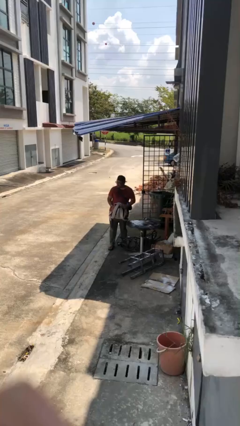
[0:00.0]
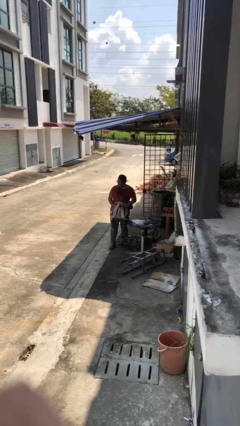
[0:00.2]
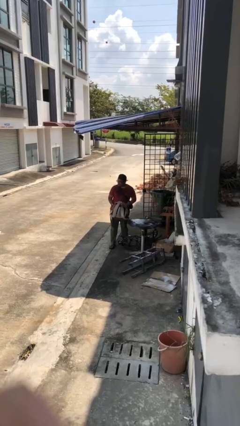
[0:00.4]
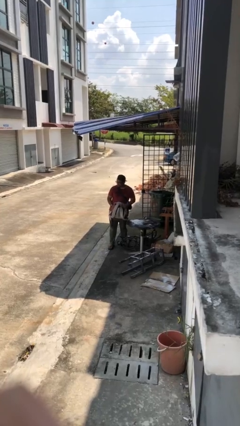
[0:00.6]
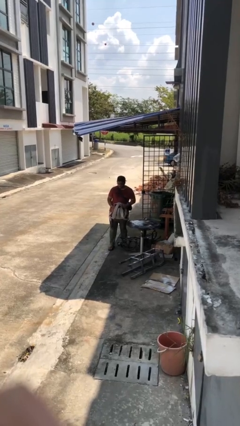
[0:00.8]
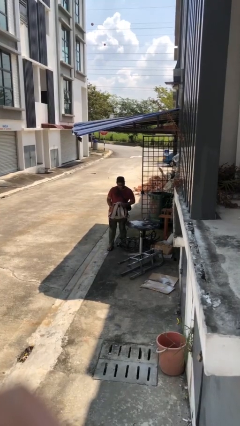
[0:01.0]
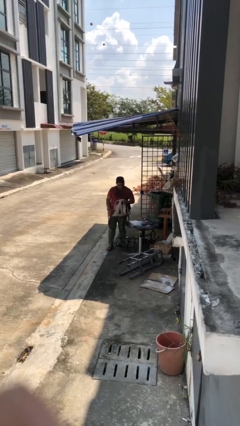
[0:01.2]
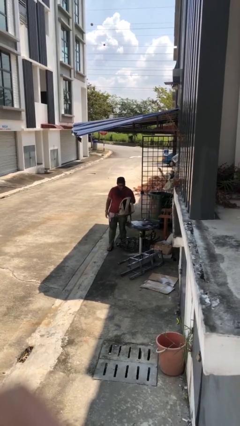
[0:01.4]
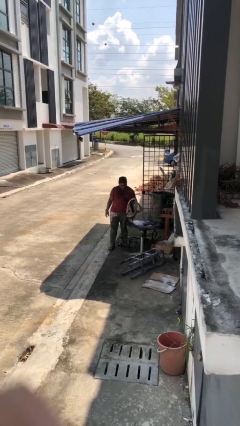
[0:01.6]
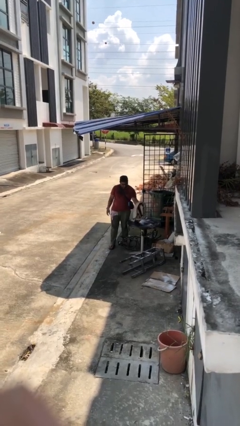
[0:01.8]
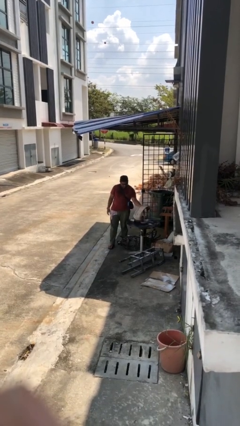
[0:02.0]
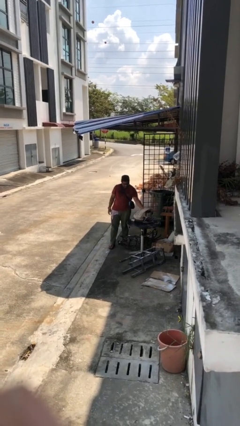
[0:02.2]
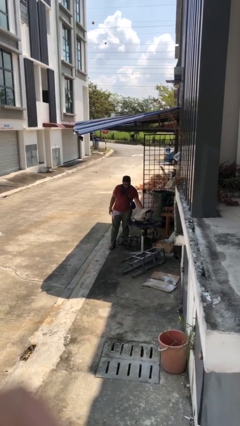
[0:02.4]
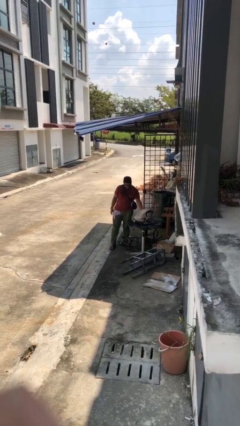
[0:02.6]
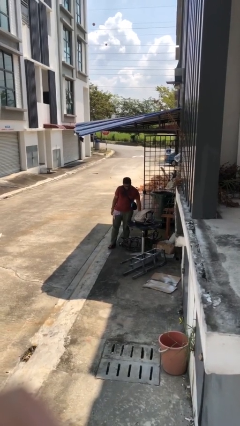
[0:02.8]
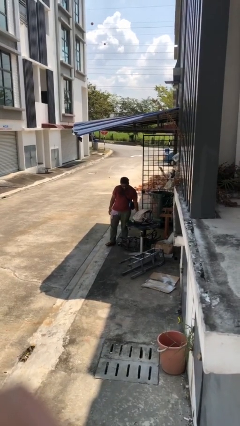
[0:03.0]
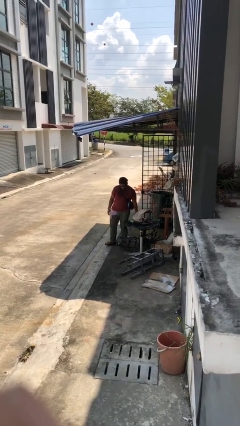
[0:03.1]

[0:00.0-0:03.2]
person puts down object on table

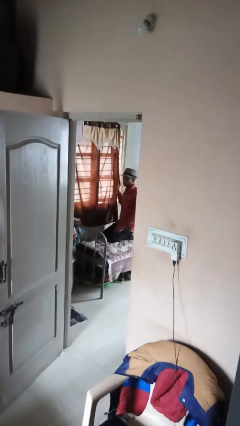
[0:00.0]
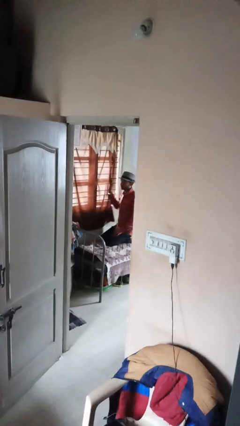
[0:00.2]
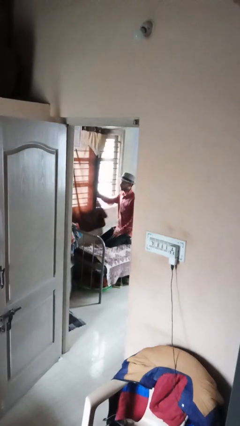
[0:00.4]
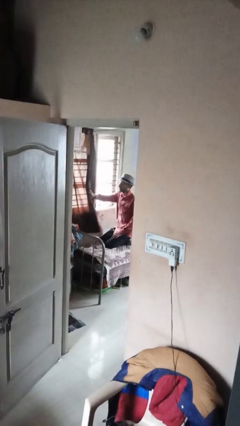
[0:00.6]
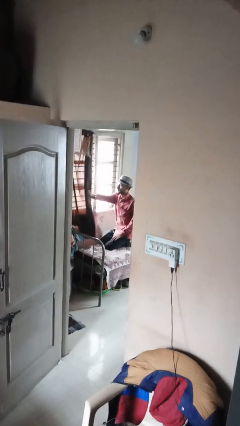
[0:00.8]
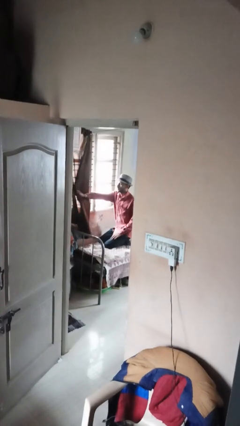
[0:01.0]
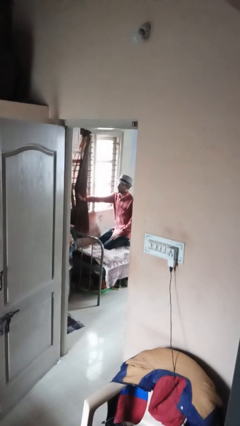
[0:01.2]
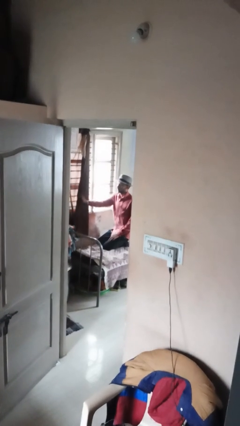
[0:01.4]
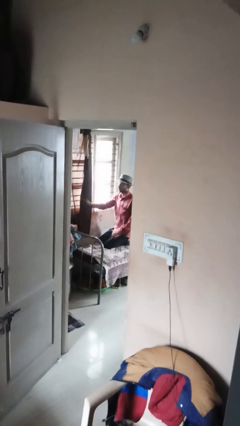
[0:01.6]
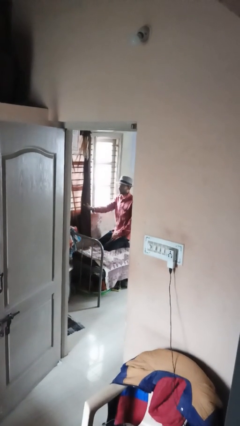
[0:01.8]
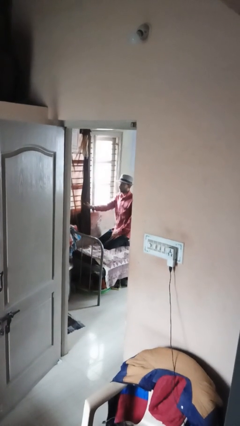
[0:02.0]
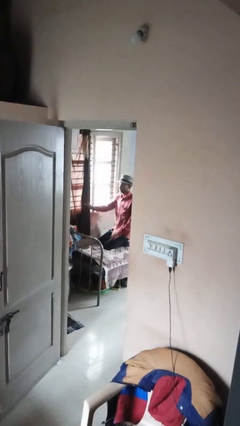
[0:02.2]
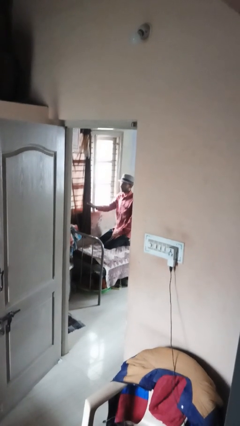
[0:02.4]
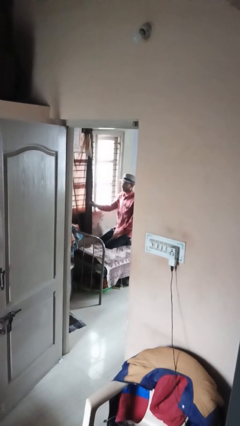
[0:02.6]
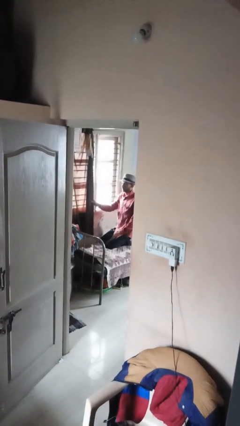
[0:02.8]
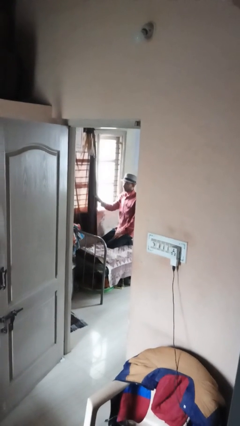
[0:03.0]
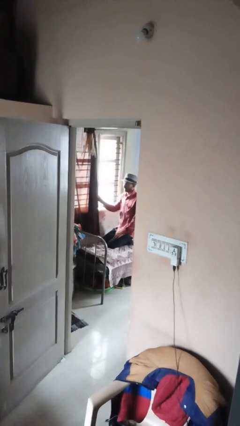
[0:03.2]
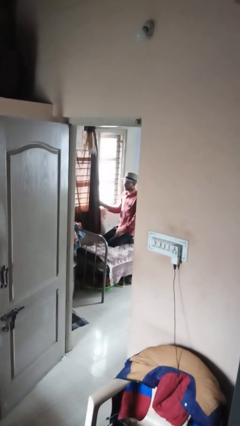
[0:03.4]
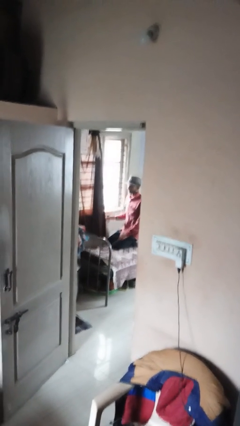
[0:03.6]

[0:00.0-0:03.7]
person opens curtains

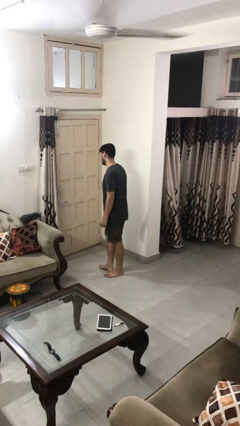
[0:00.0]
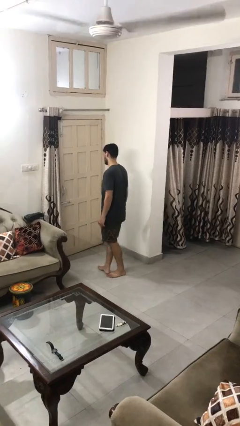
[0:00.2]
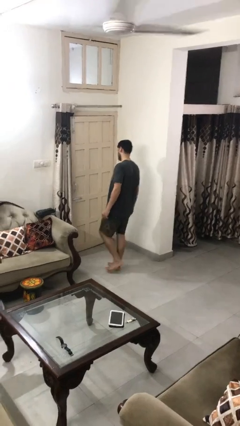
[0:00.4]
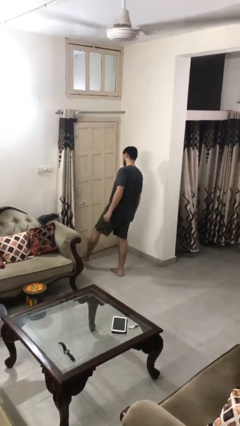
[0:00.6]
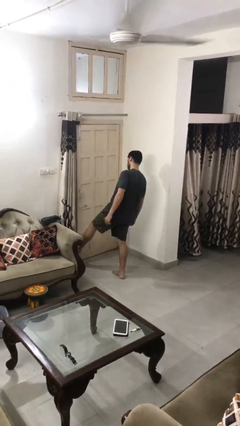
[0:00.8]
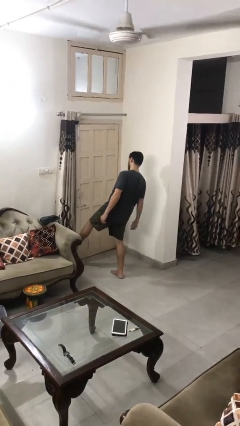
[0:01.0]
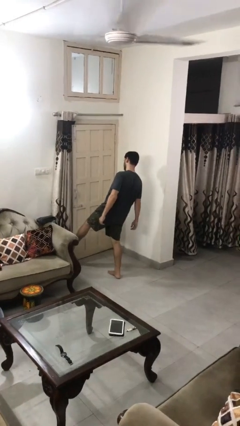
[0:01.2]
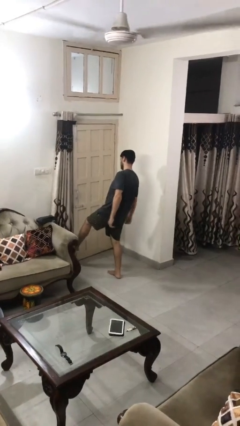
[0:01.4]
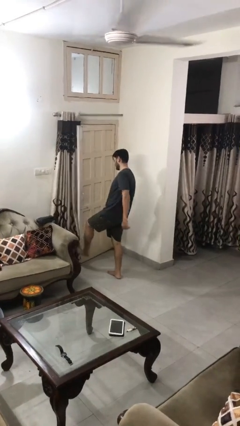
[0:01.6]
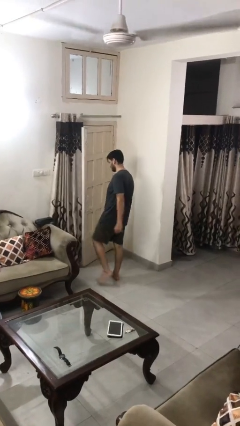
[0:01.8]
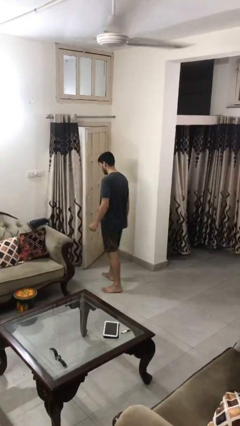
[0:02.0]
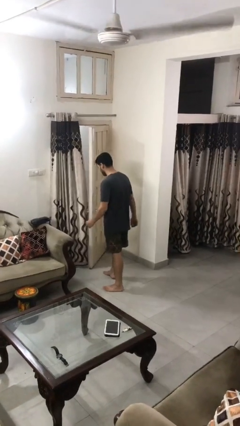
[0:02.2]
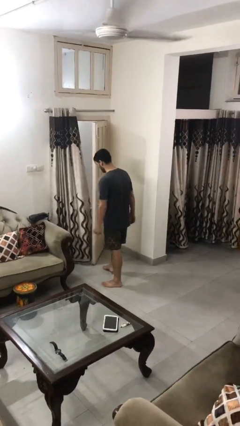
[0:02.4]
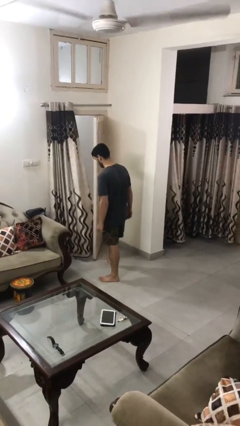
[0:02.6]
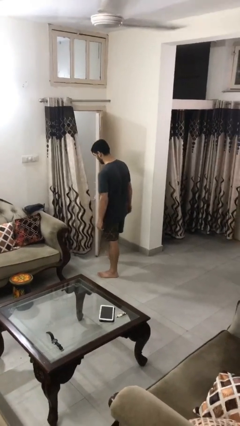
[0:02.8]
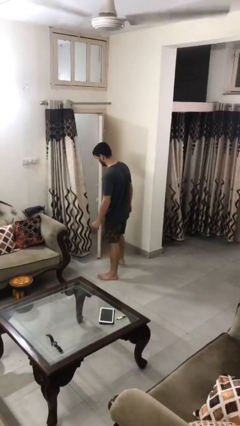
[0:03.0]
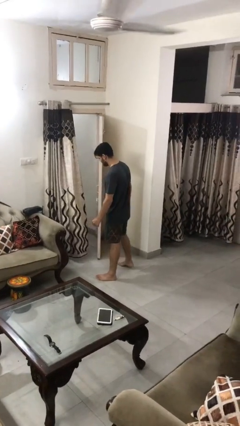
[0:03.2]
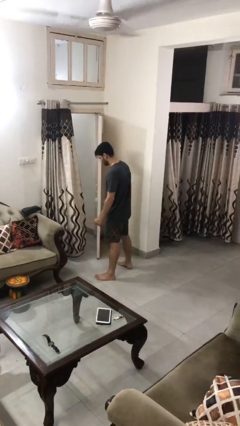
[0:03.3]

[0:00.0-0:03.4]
person opens facility door

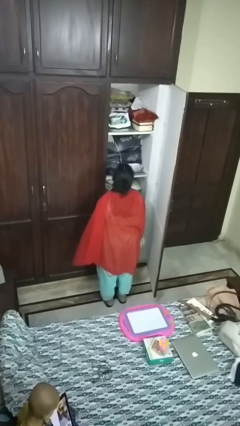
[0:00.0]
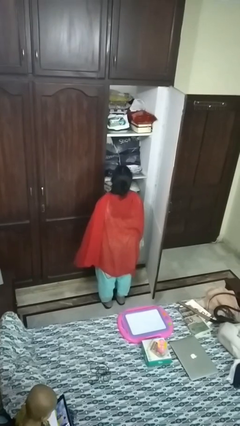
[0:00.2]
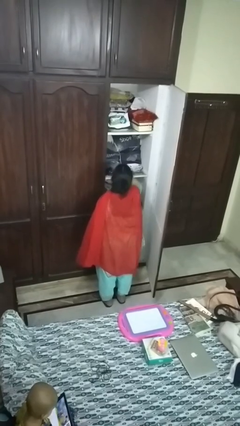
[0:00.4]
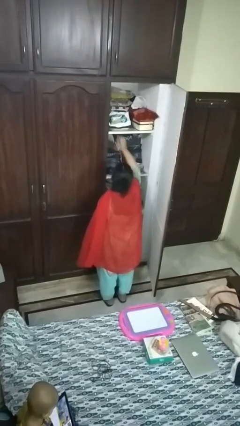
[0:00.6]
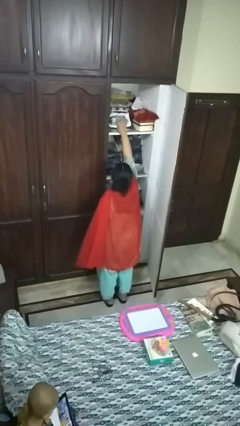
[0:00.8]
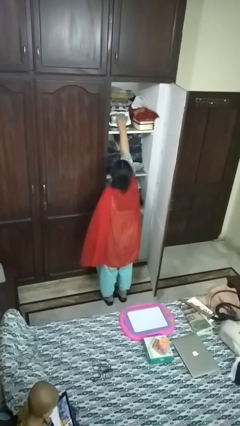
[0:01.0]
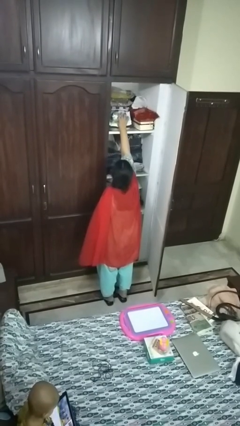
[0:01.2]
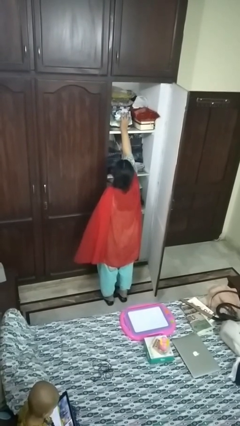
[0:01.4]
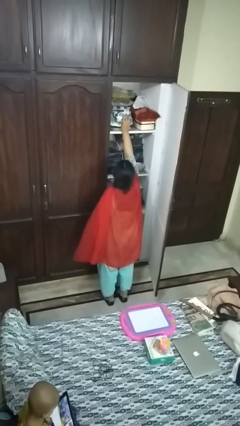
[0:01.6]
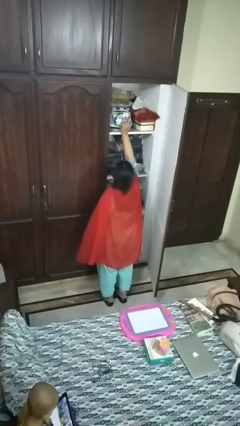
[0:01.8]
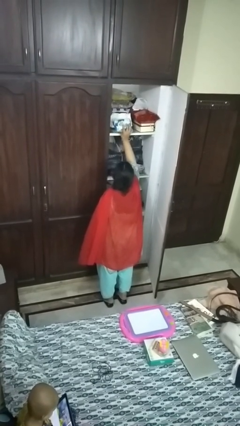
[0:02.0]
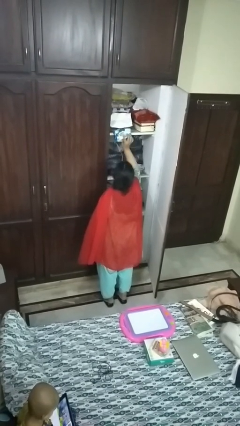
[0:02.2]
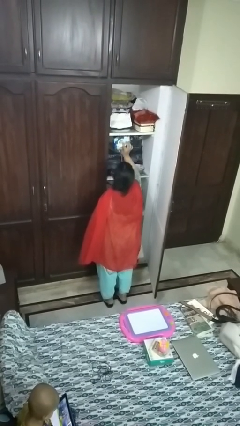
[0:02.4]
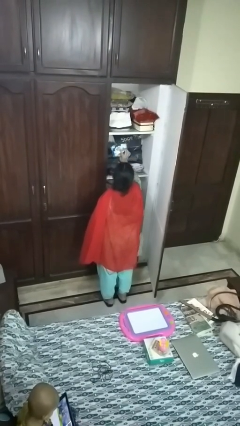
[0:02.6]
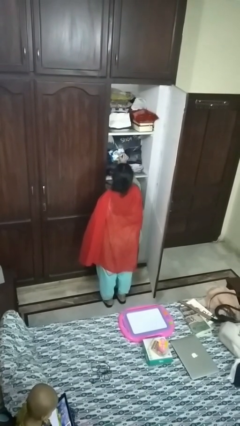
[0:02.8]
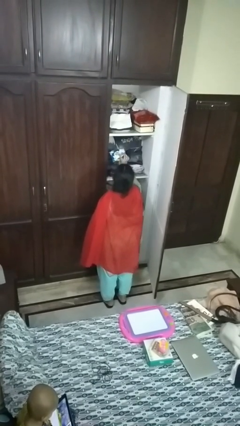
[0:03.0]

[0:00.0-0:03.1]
person picks up object from countertop

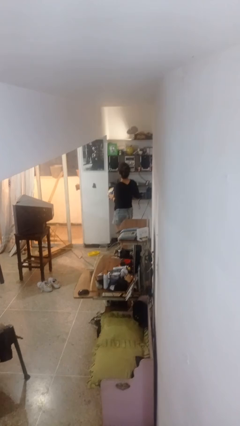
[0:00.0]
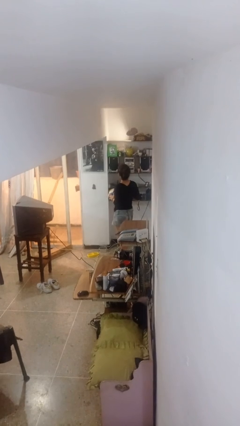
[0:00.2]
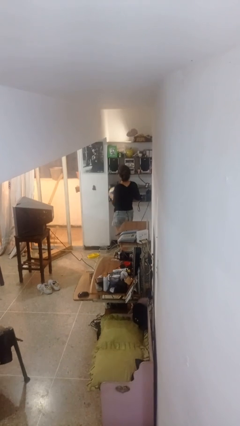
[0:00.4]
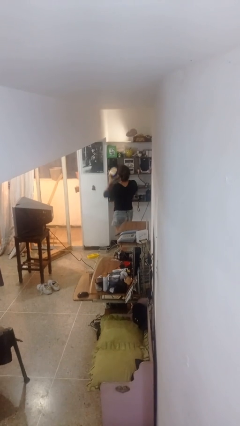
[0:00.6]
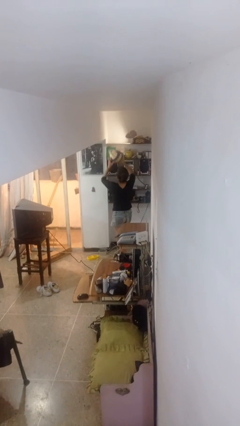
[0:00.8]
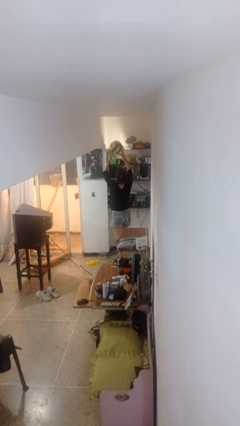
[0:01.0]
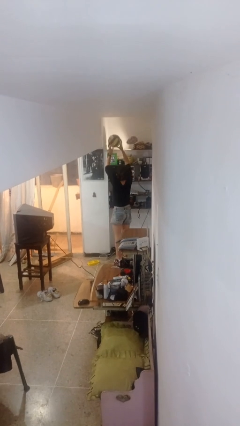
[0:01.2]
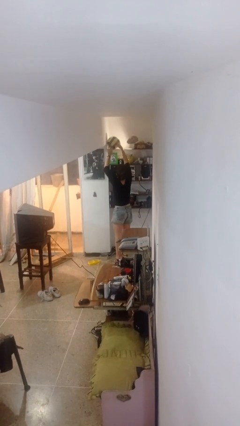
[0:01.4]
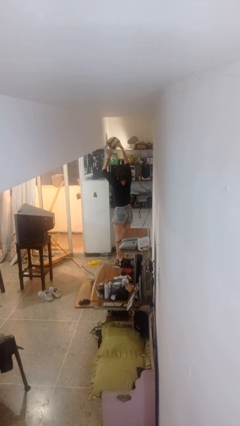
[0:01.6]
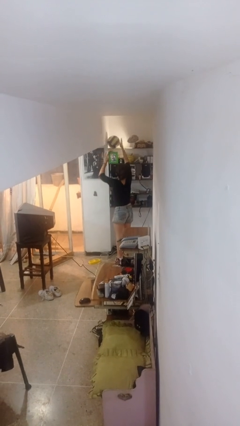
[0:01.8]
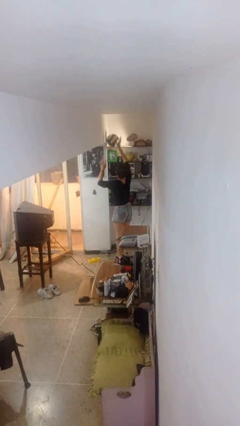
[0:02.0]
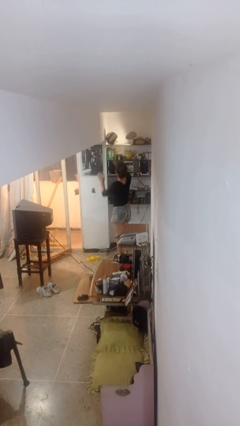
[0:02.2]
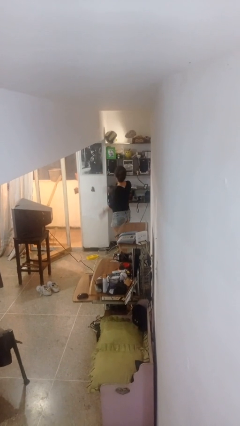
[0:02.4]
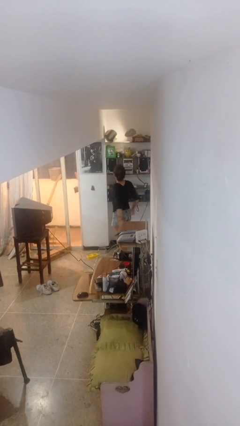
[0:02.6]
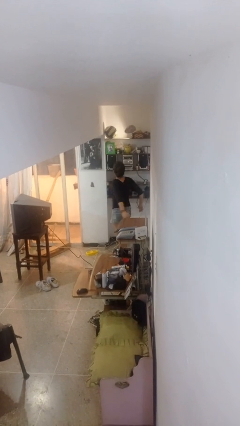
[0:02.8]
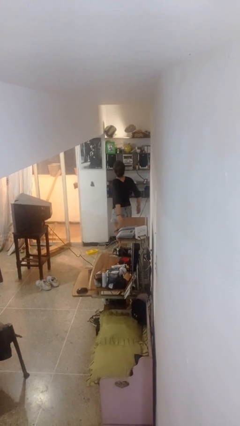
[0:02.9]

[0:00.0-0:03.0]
person puts down object on shelf

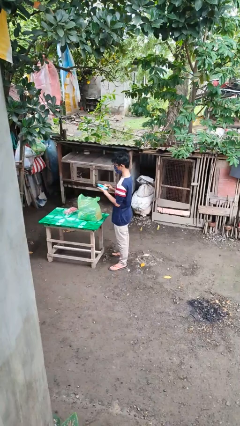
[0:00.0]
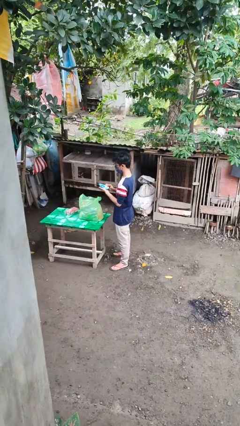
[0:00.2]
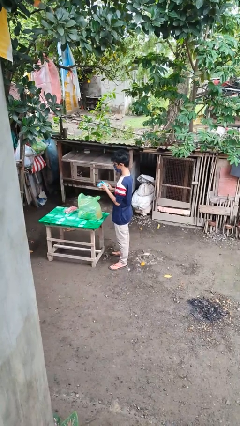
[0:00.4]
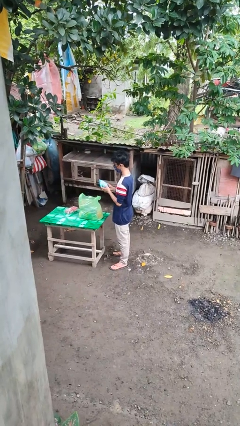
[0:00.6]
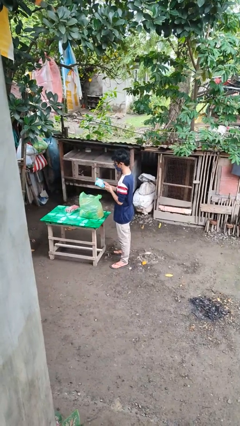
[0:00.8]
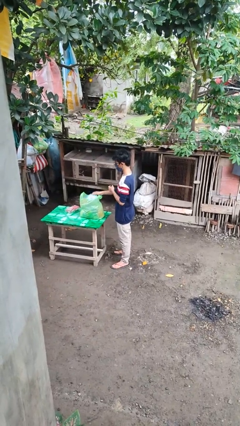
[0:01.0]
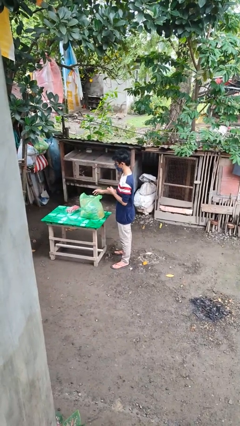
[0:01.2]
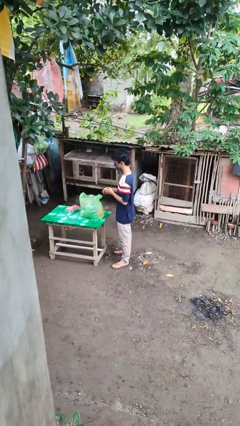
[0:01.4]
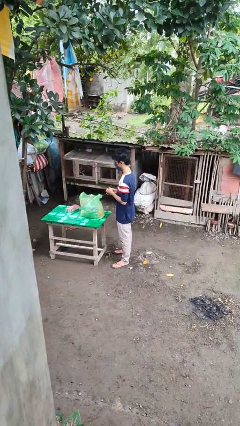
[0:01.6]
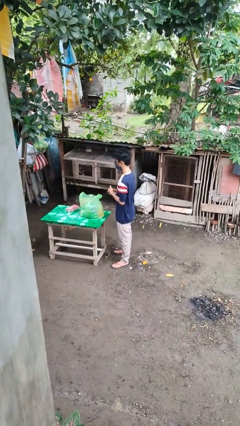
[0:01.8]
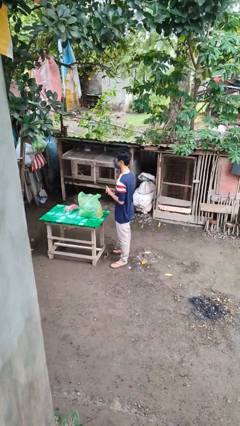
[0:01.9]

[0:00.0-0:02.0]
person puts object into bag
